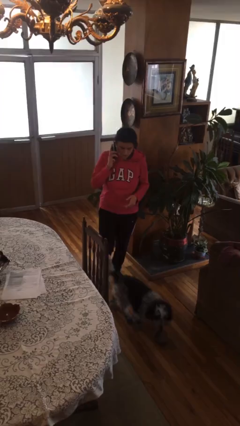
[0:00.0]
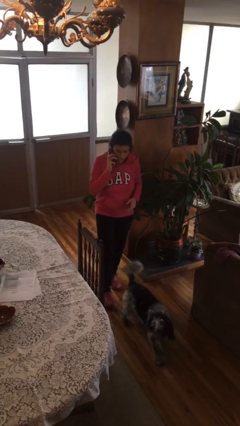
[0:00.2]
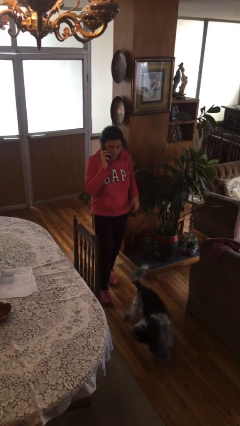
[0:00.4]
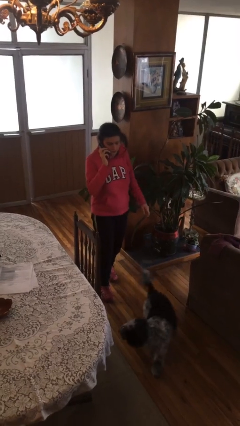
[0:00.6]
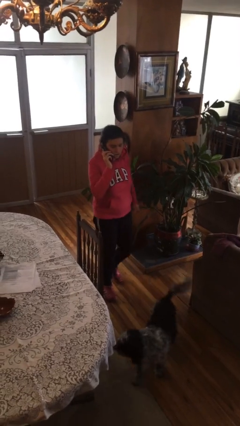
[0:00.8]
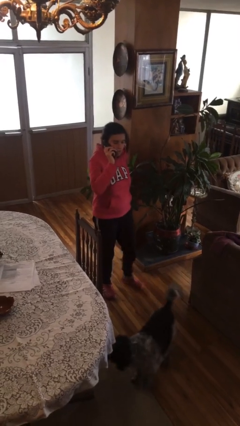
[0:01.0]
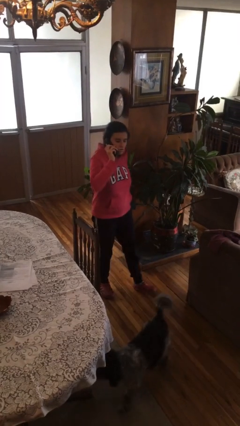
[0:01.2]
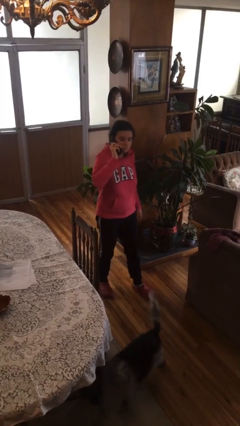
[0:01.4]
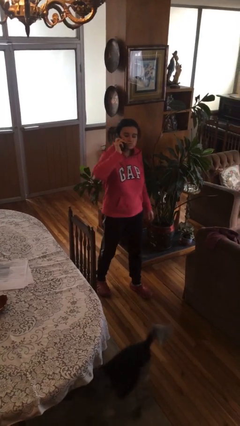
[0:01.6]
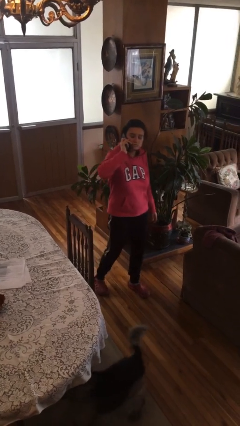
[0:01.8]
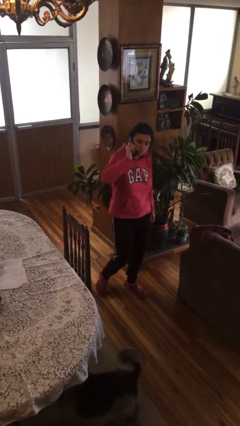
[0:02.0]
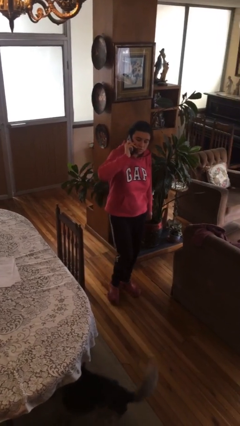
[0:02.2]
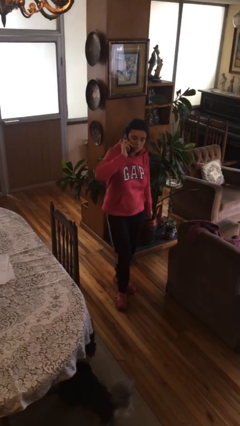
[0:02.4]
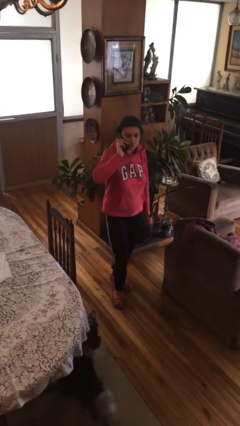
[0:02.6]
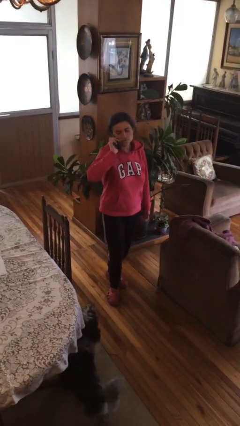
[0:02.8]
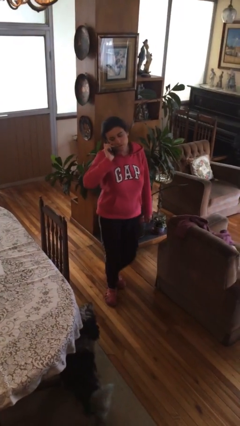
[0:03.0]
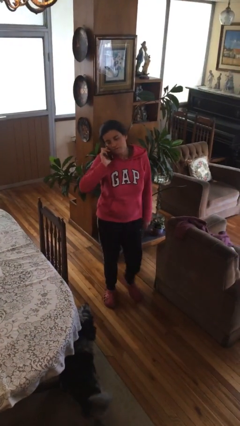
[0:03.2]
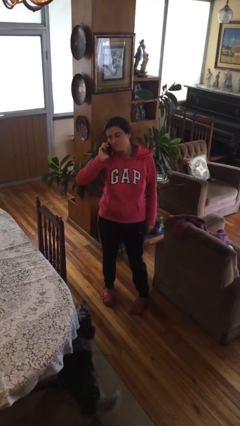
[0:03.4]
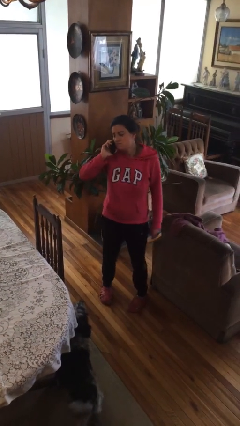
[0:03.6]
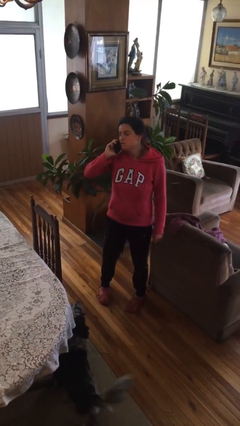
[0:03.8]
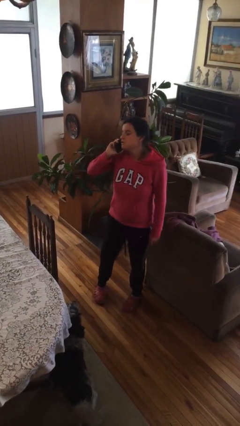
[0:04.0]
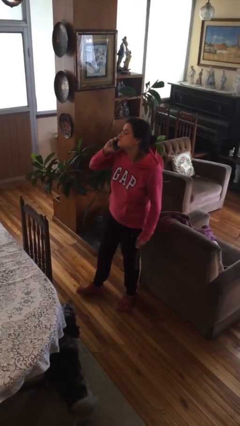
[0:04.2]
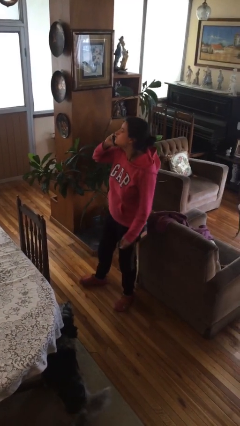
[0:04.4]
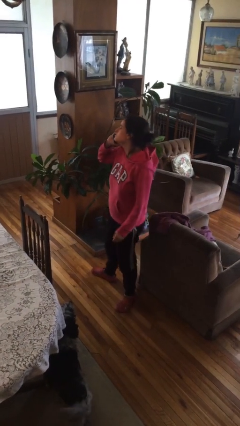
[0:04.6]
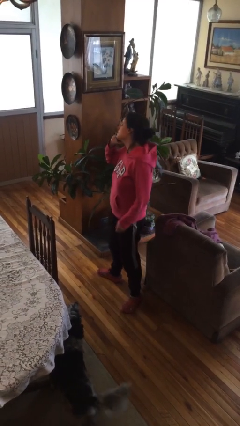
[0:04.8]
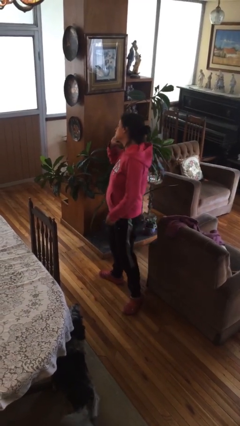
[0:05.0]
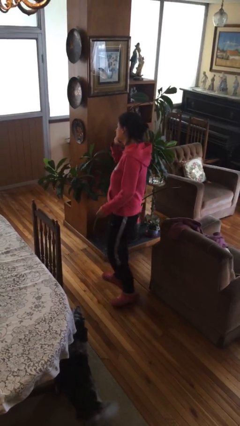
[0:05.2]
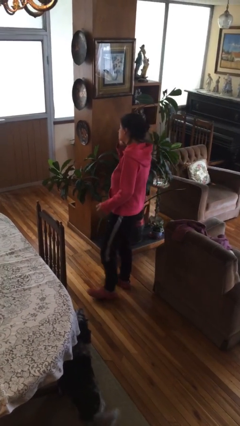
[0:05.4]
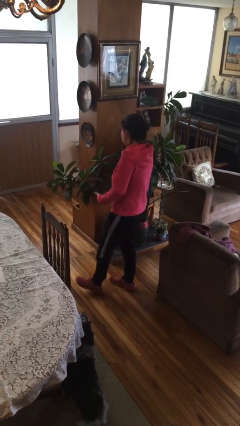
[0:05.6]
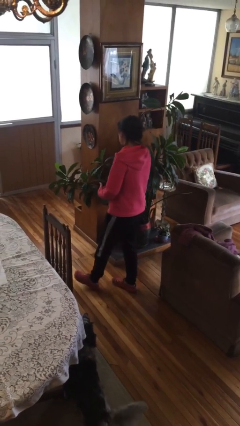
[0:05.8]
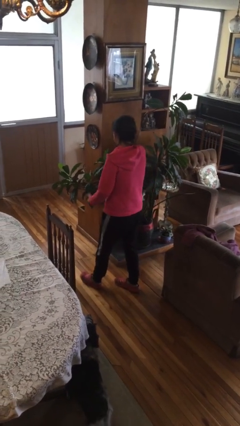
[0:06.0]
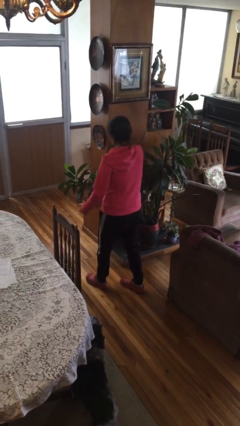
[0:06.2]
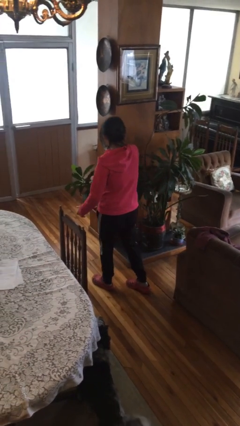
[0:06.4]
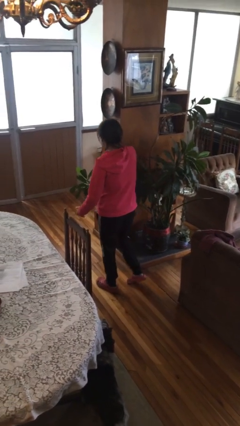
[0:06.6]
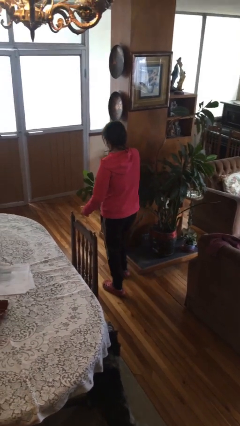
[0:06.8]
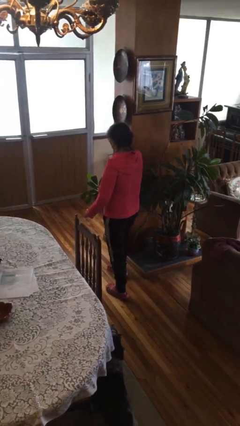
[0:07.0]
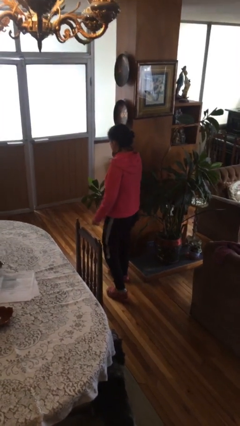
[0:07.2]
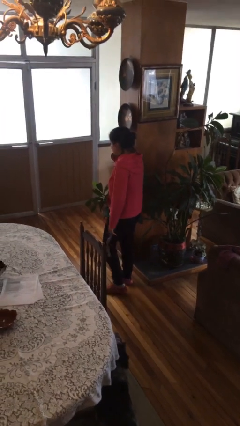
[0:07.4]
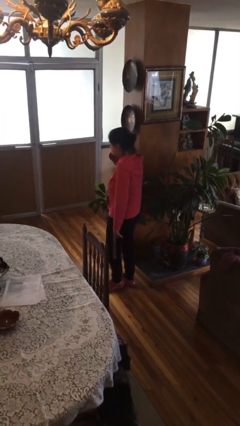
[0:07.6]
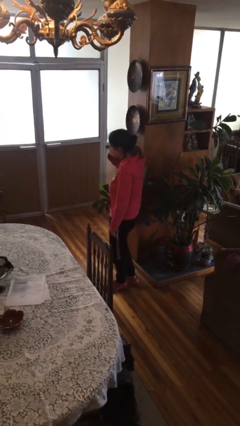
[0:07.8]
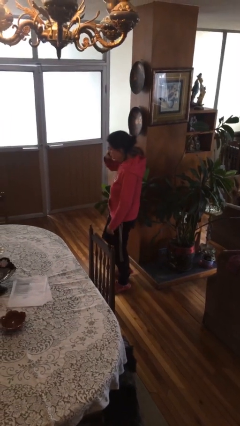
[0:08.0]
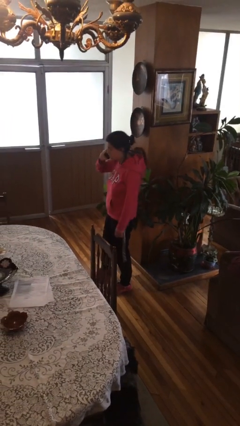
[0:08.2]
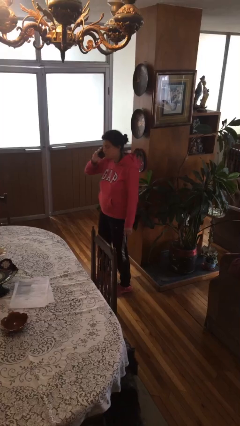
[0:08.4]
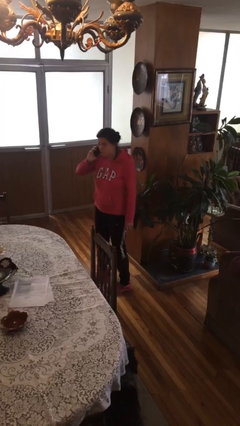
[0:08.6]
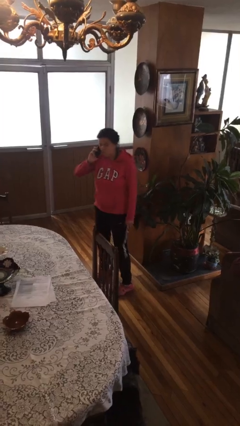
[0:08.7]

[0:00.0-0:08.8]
person talks on phone

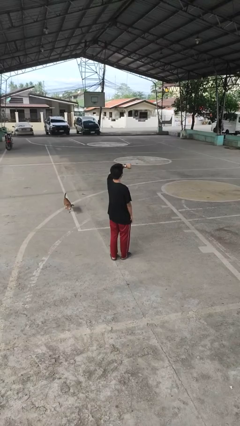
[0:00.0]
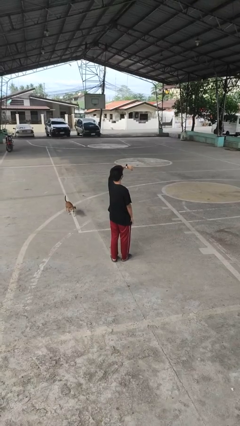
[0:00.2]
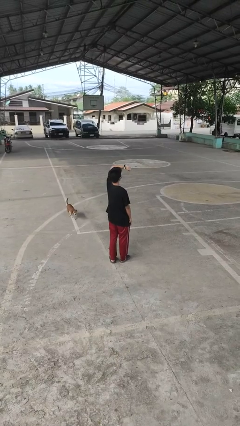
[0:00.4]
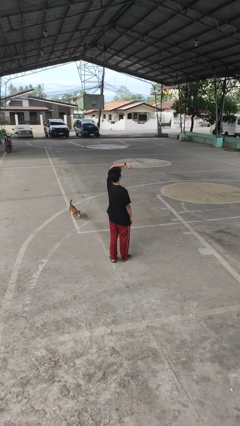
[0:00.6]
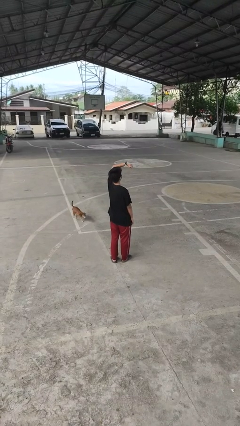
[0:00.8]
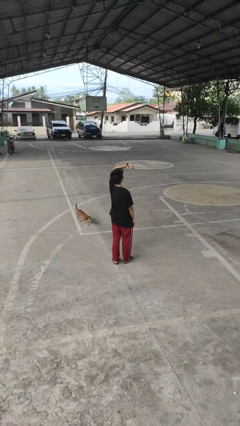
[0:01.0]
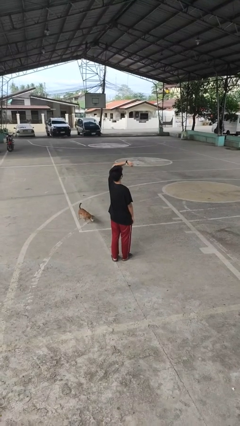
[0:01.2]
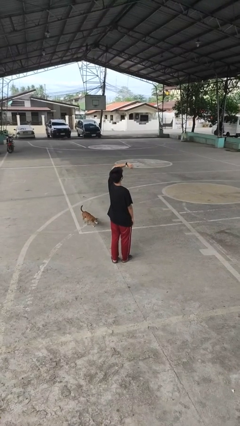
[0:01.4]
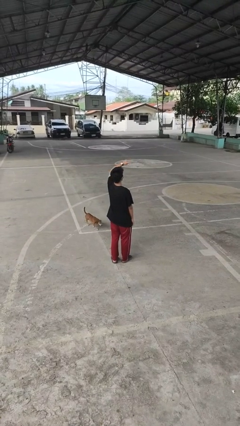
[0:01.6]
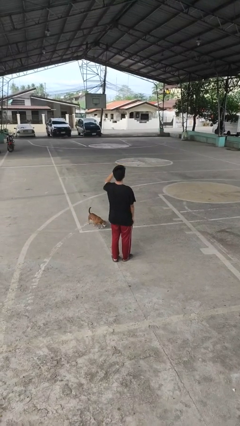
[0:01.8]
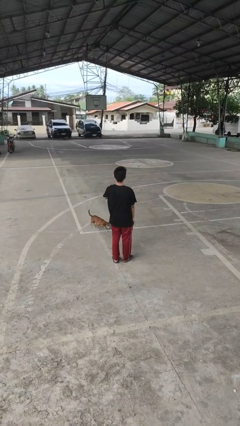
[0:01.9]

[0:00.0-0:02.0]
person looks at wristwatch

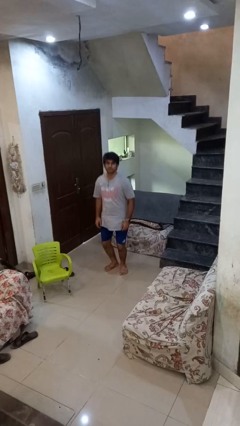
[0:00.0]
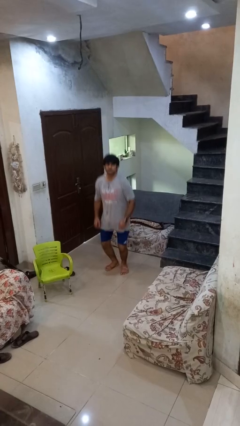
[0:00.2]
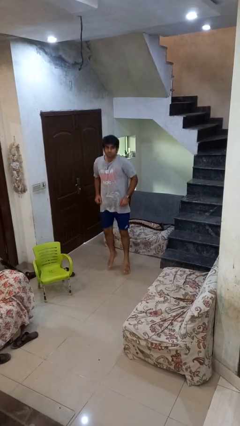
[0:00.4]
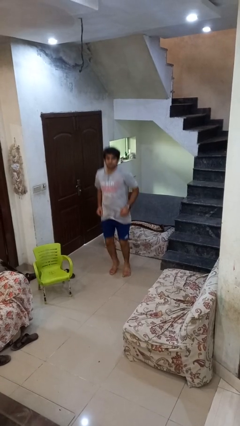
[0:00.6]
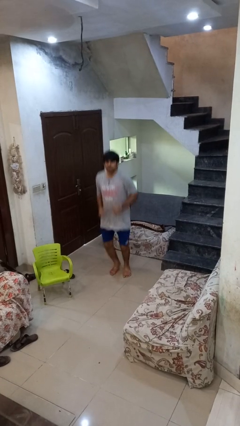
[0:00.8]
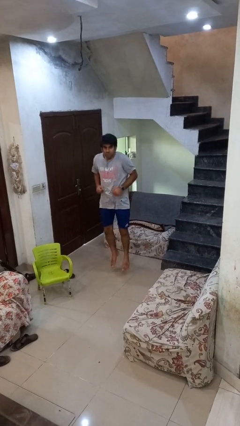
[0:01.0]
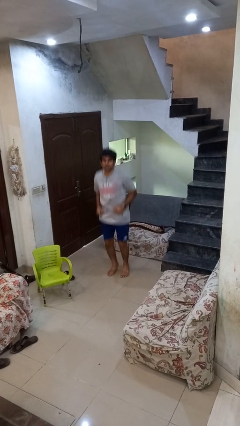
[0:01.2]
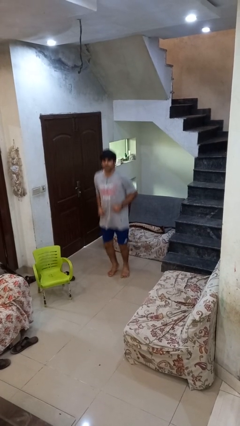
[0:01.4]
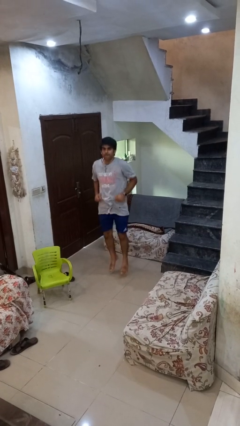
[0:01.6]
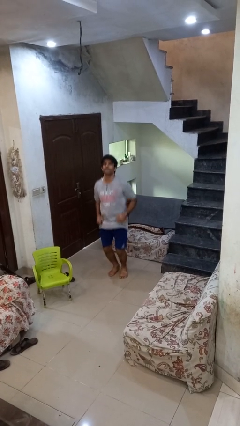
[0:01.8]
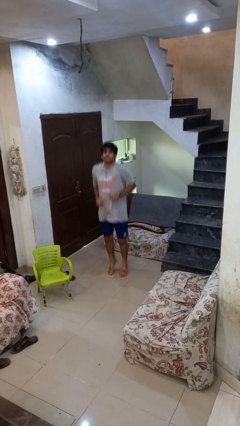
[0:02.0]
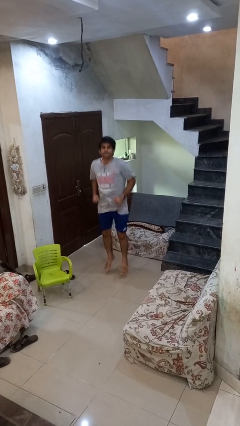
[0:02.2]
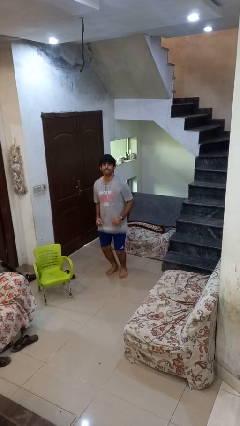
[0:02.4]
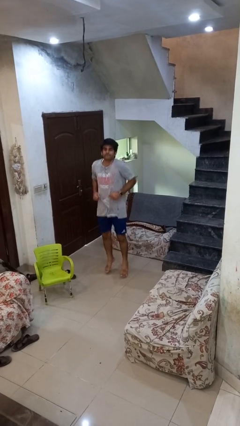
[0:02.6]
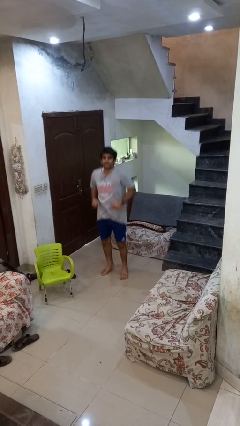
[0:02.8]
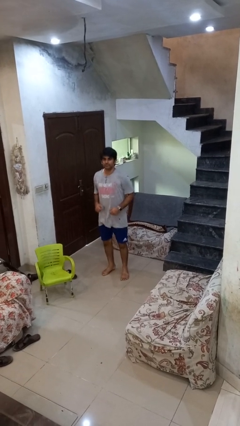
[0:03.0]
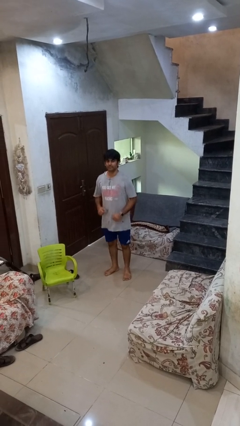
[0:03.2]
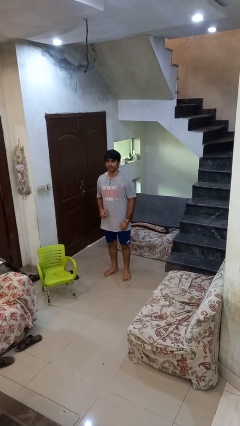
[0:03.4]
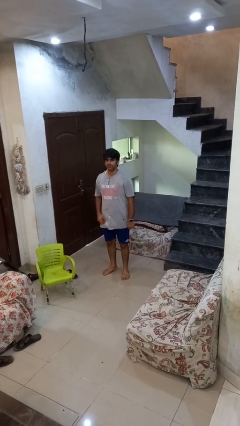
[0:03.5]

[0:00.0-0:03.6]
person jumps

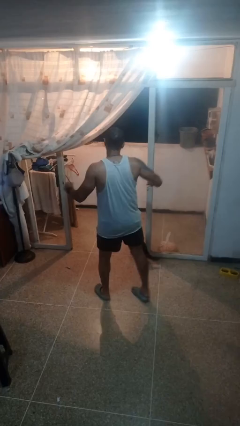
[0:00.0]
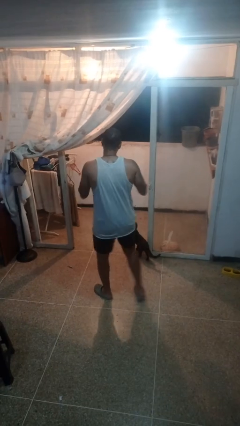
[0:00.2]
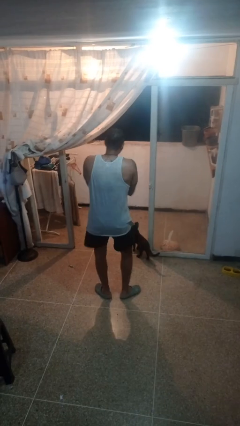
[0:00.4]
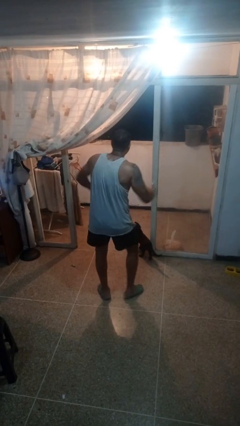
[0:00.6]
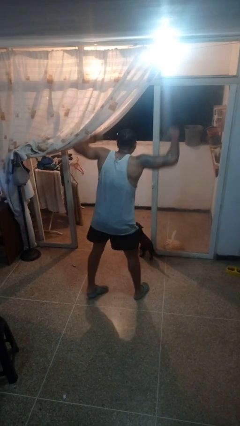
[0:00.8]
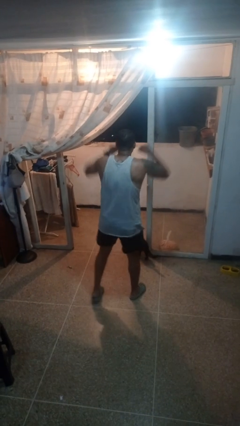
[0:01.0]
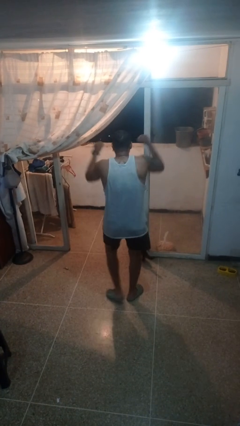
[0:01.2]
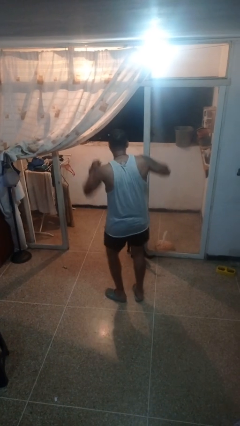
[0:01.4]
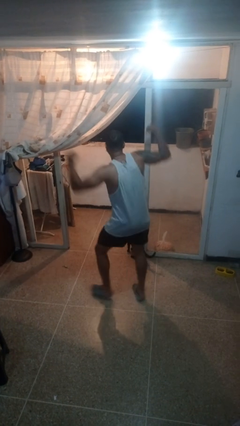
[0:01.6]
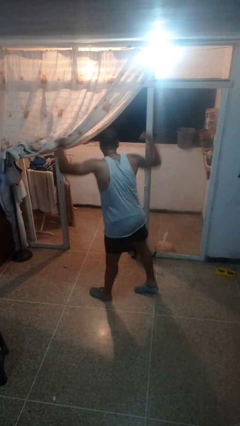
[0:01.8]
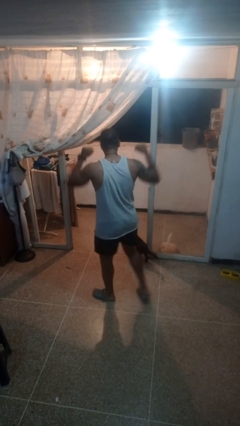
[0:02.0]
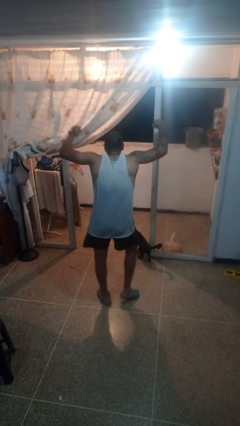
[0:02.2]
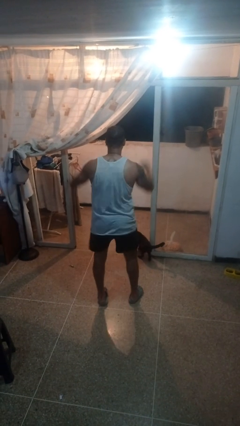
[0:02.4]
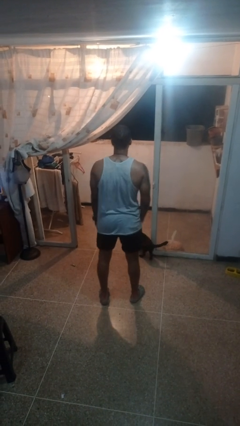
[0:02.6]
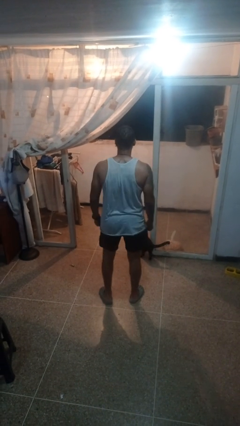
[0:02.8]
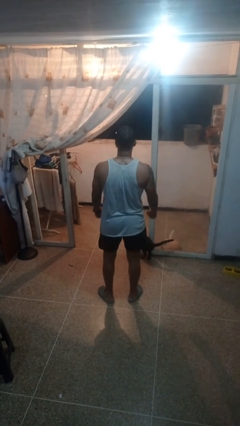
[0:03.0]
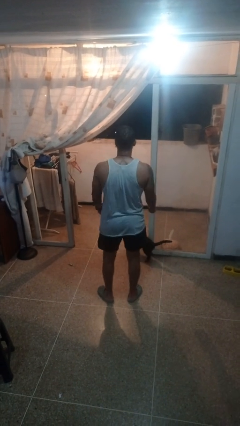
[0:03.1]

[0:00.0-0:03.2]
person dances in place
